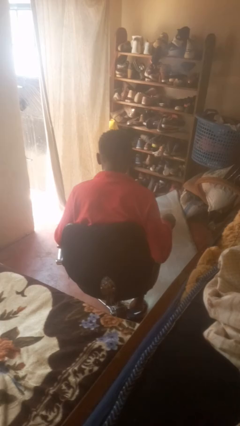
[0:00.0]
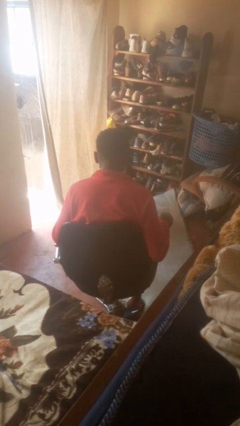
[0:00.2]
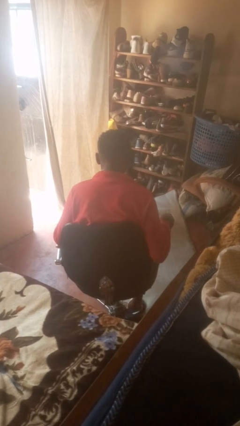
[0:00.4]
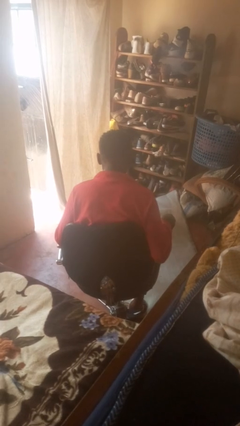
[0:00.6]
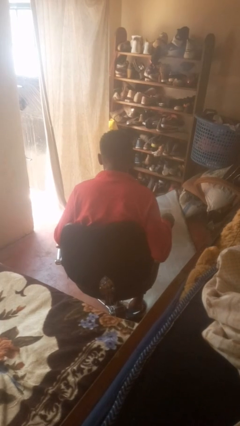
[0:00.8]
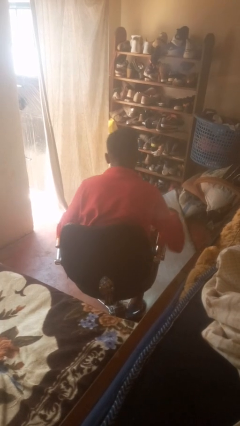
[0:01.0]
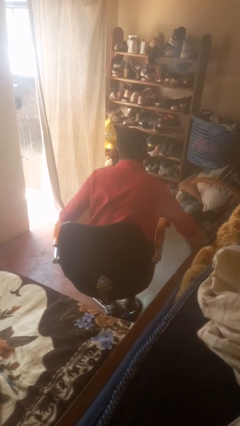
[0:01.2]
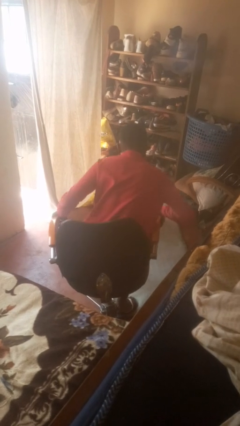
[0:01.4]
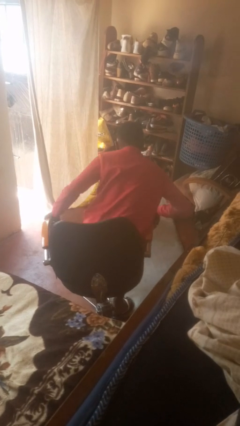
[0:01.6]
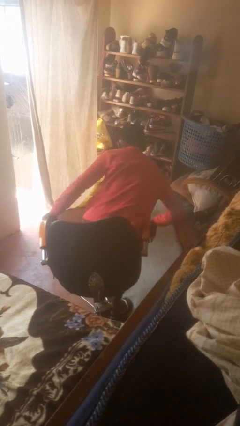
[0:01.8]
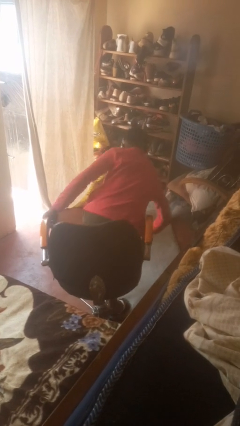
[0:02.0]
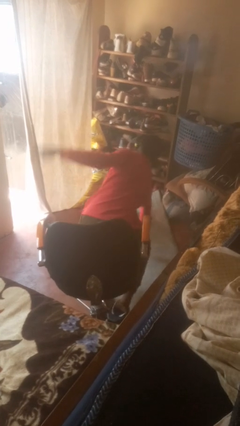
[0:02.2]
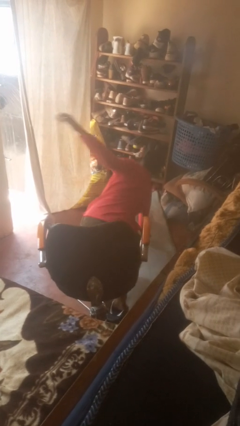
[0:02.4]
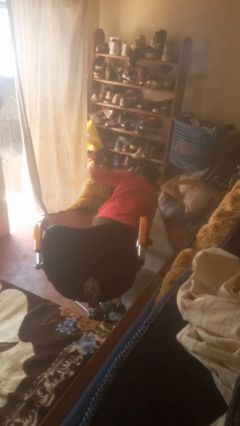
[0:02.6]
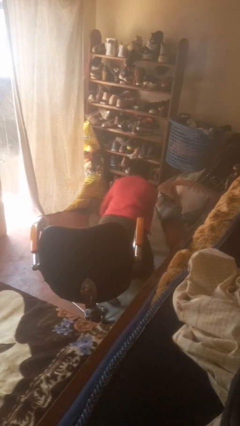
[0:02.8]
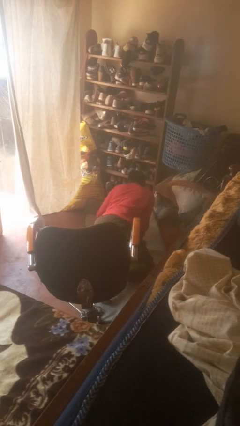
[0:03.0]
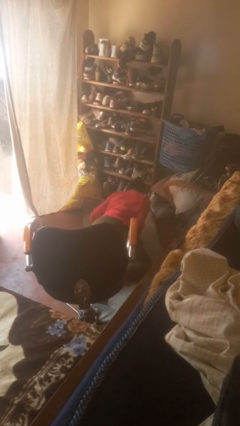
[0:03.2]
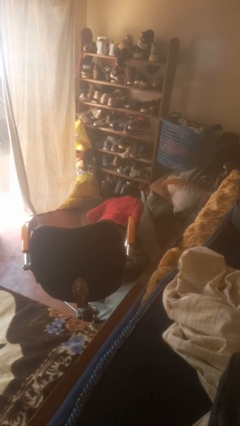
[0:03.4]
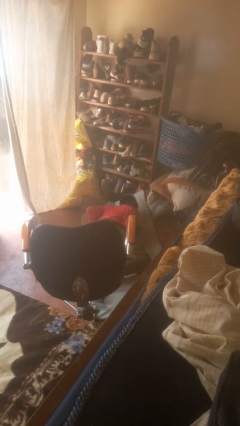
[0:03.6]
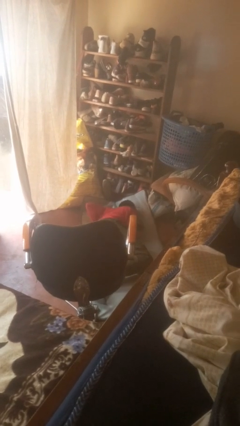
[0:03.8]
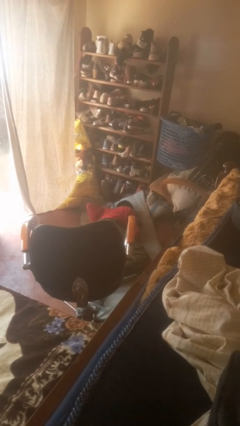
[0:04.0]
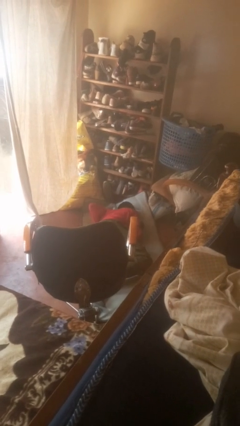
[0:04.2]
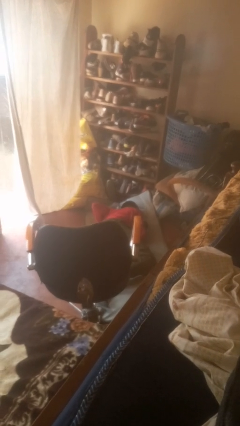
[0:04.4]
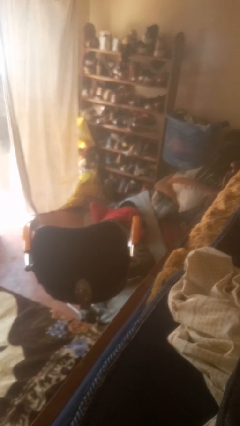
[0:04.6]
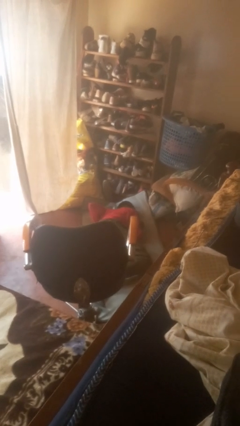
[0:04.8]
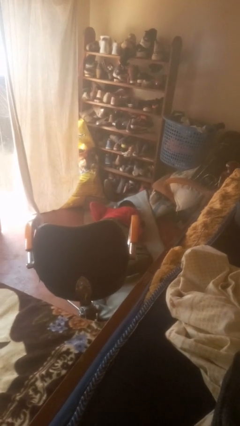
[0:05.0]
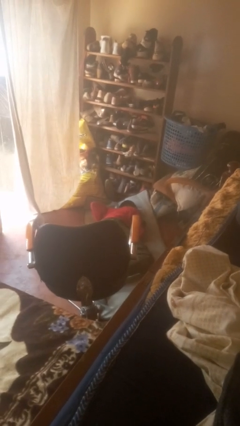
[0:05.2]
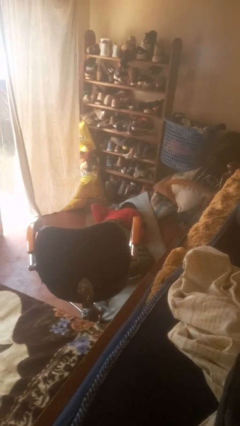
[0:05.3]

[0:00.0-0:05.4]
person falls from chair

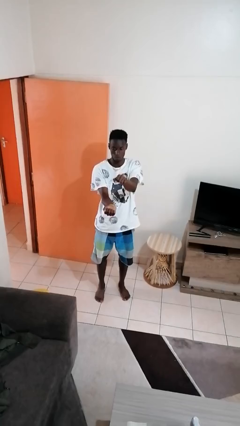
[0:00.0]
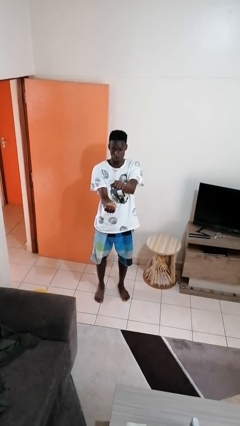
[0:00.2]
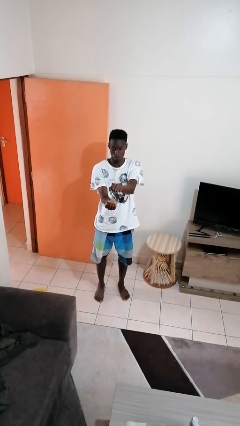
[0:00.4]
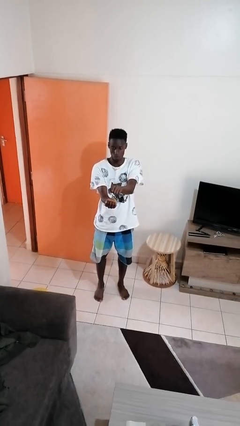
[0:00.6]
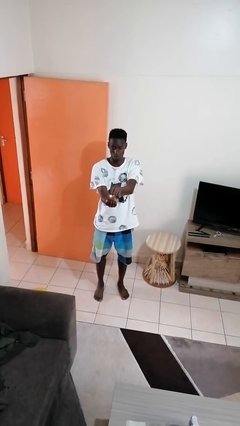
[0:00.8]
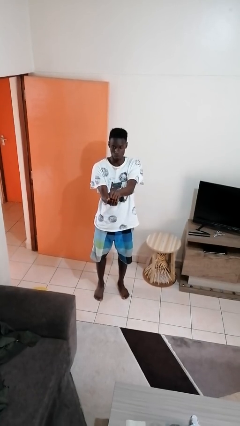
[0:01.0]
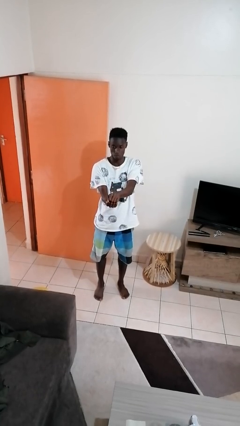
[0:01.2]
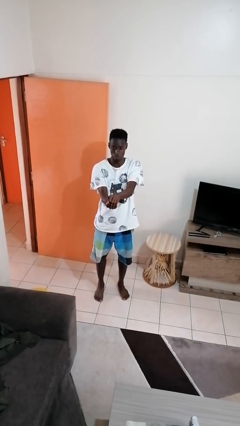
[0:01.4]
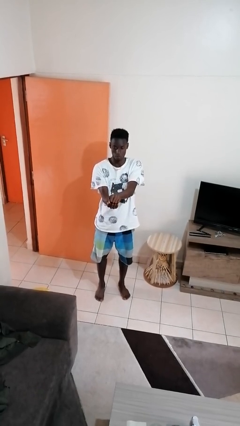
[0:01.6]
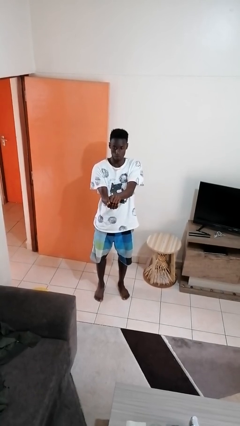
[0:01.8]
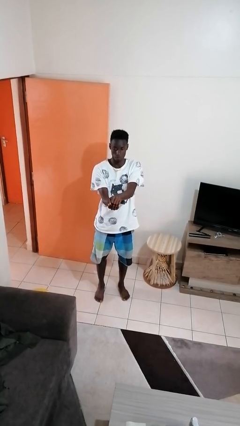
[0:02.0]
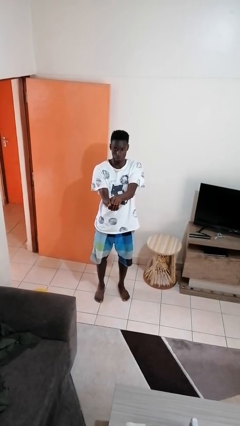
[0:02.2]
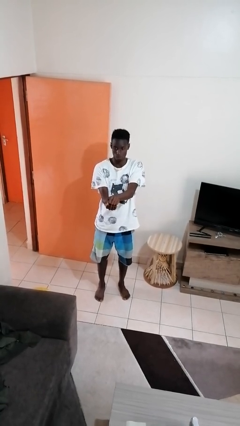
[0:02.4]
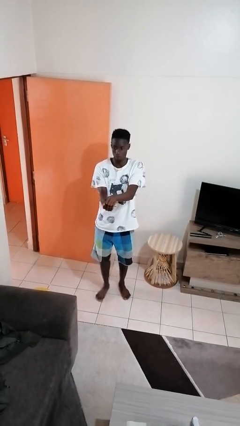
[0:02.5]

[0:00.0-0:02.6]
person gestures zoom out

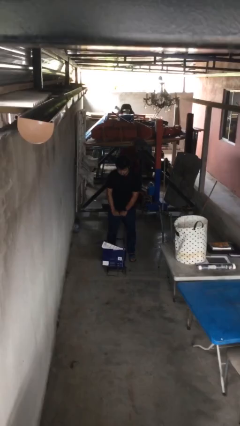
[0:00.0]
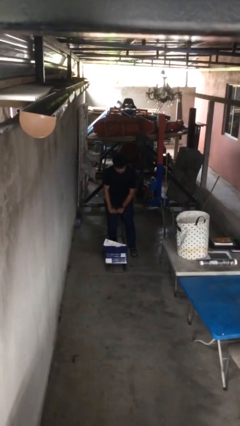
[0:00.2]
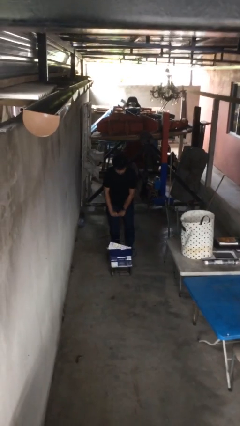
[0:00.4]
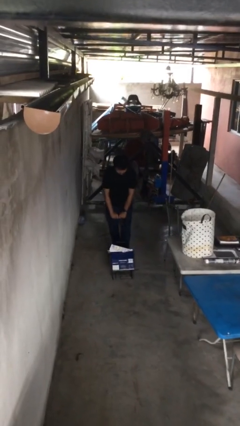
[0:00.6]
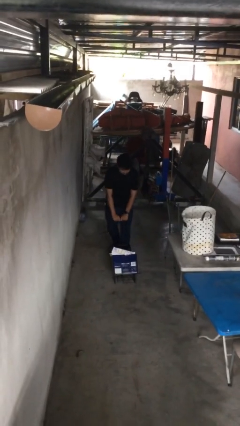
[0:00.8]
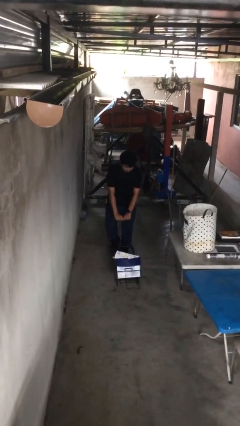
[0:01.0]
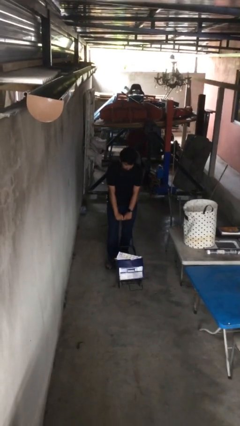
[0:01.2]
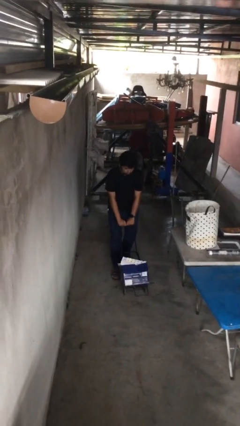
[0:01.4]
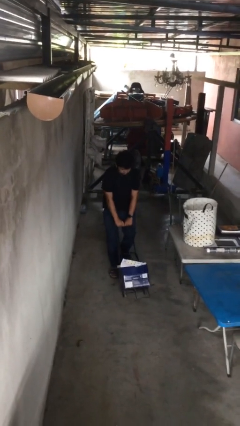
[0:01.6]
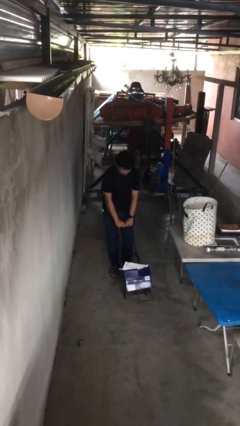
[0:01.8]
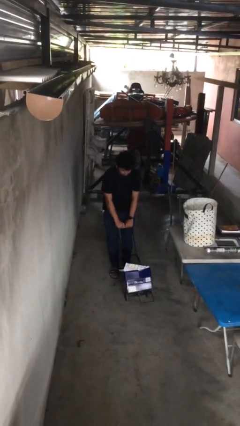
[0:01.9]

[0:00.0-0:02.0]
person pushes wheeled cart

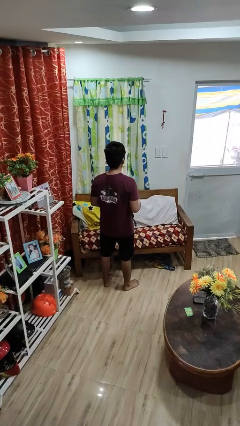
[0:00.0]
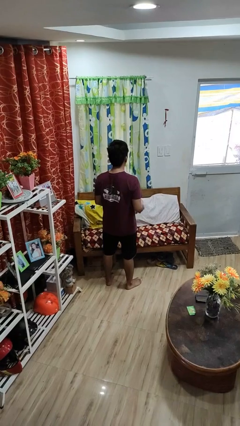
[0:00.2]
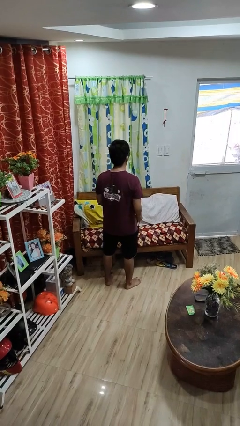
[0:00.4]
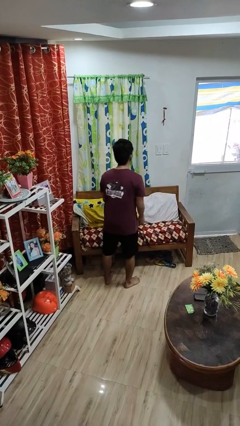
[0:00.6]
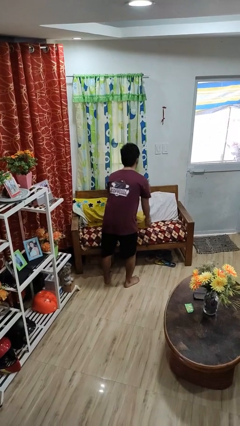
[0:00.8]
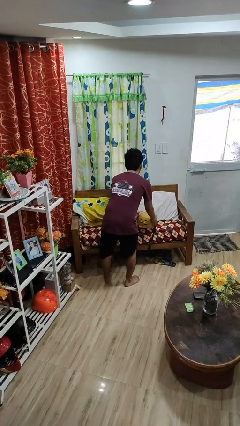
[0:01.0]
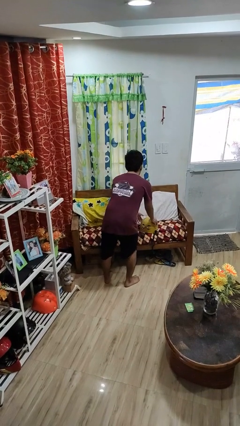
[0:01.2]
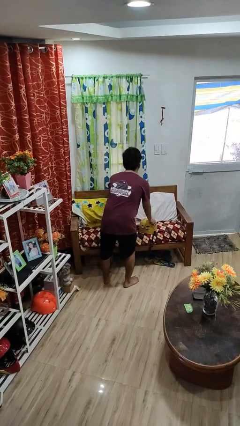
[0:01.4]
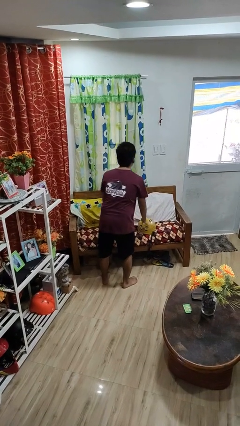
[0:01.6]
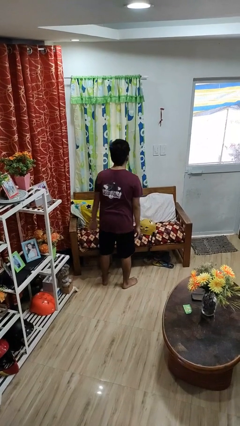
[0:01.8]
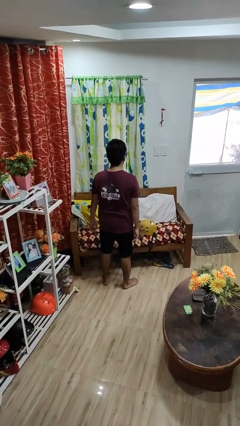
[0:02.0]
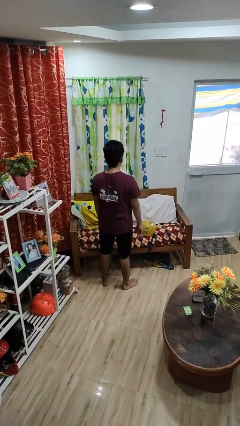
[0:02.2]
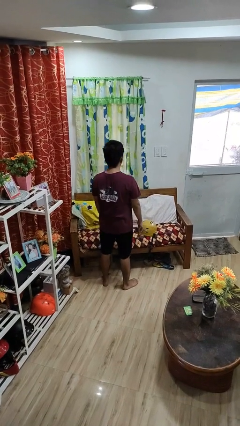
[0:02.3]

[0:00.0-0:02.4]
person puts down object on couch

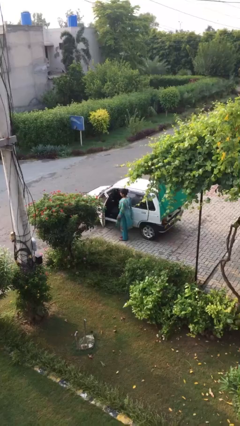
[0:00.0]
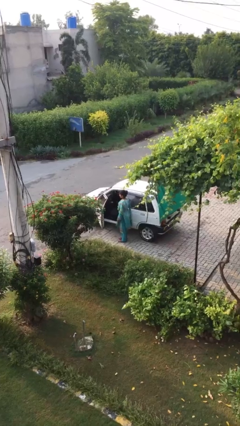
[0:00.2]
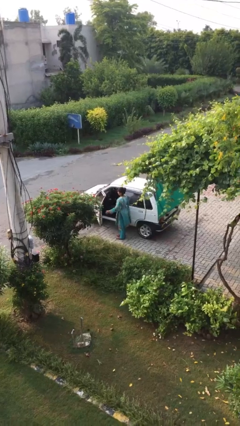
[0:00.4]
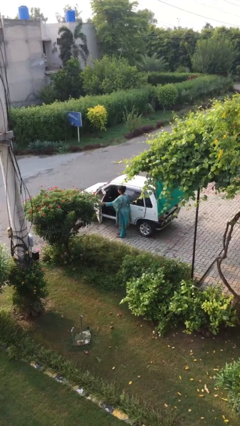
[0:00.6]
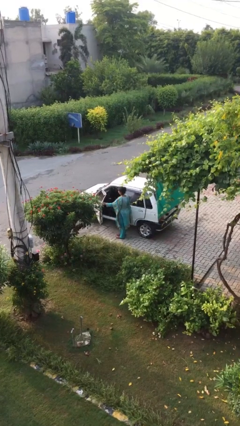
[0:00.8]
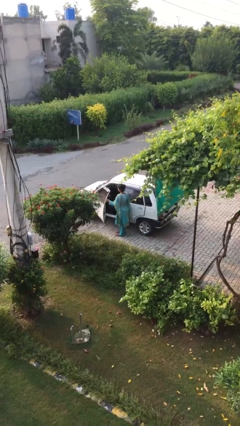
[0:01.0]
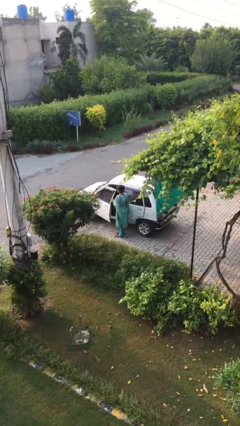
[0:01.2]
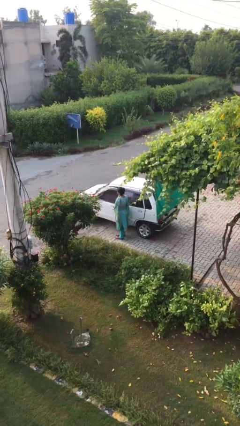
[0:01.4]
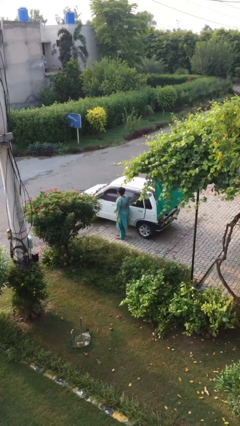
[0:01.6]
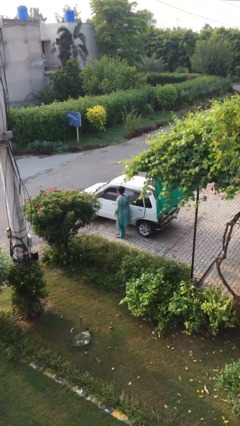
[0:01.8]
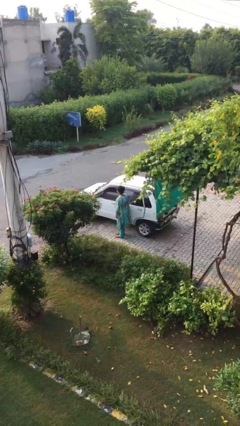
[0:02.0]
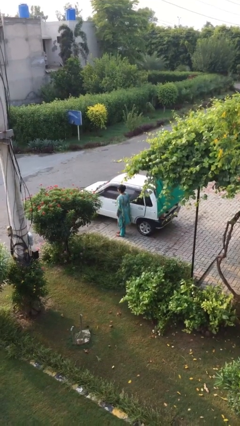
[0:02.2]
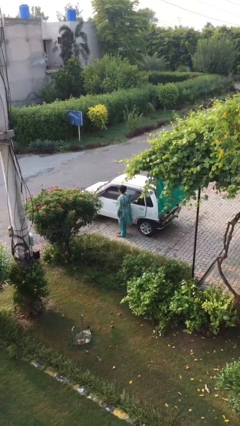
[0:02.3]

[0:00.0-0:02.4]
person closes car door

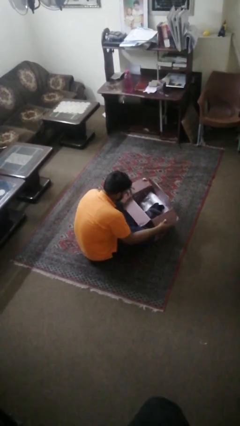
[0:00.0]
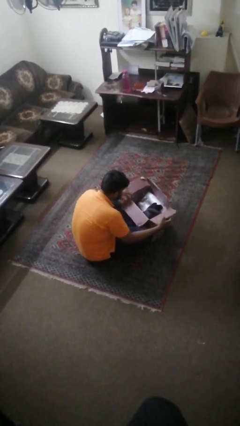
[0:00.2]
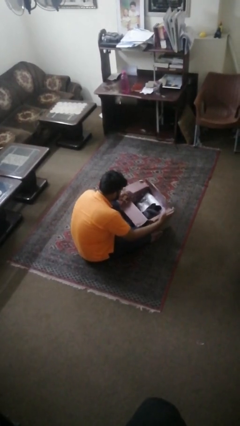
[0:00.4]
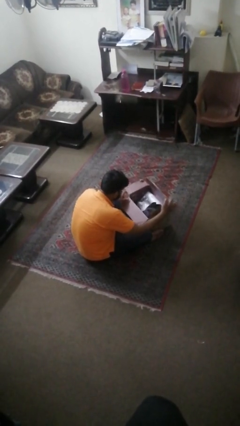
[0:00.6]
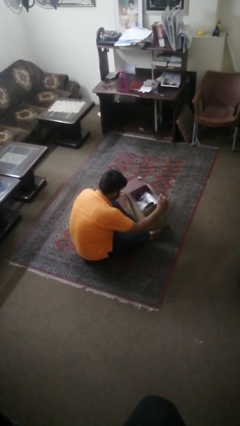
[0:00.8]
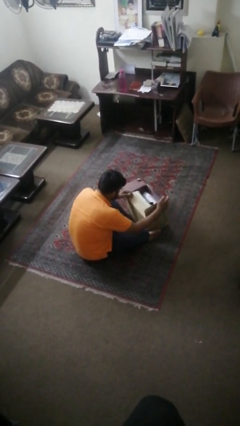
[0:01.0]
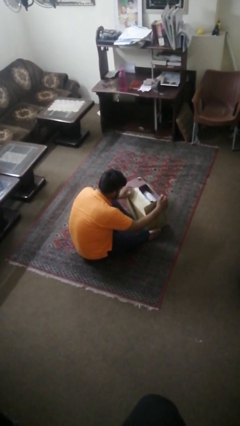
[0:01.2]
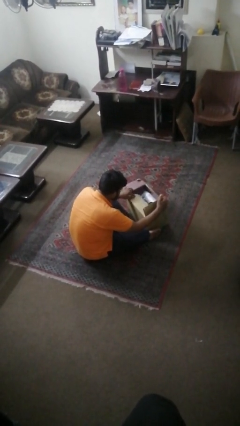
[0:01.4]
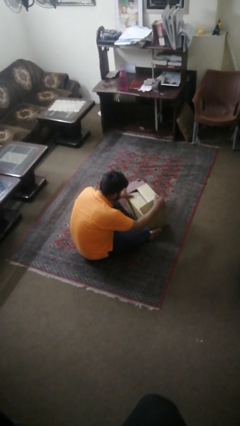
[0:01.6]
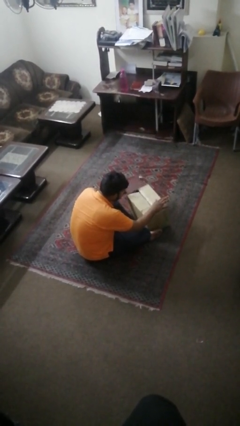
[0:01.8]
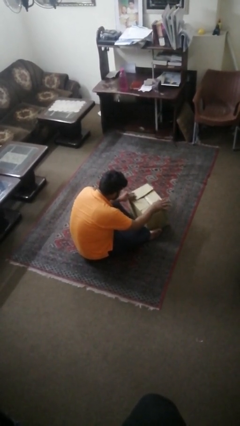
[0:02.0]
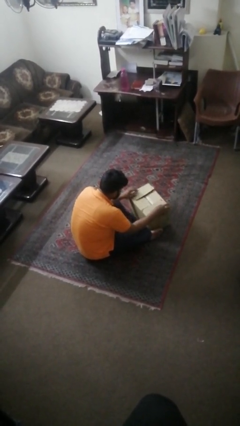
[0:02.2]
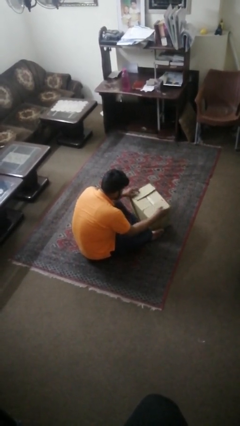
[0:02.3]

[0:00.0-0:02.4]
person closes box
